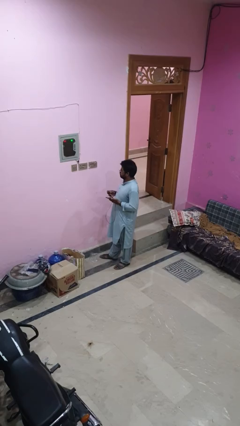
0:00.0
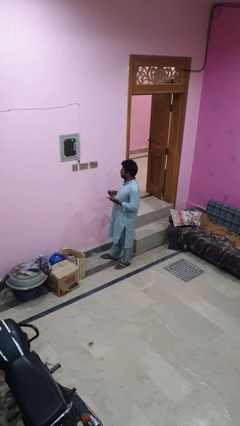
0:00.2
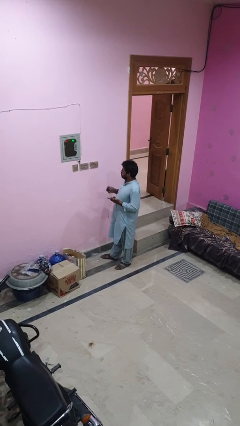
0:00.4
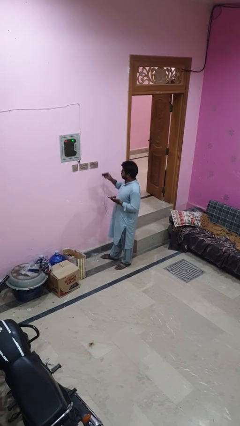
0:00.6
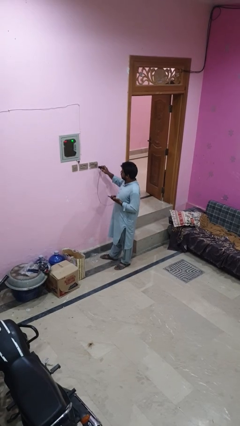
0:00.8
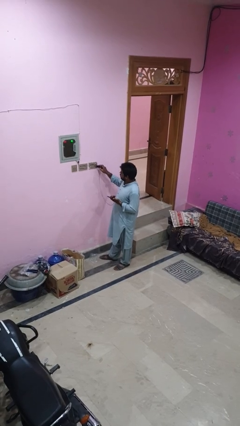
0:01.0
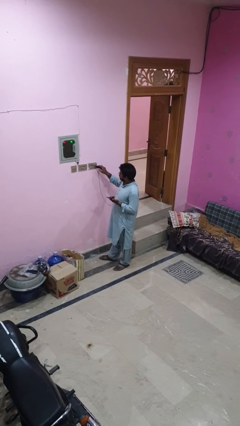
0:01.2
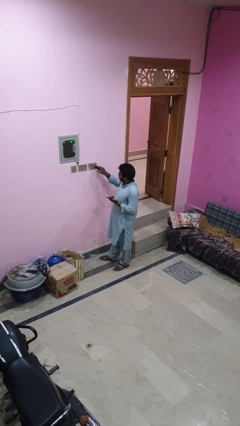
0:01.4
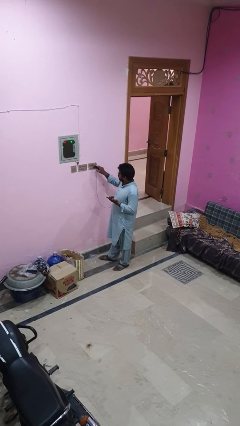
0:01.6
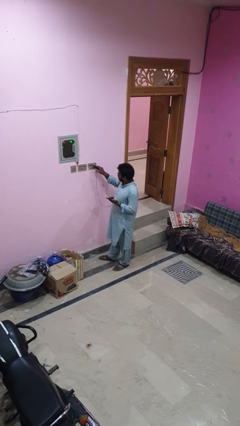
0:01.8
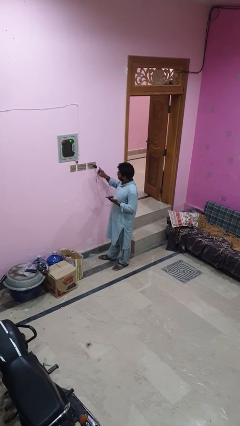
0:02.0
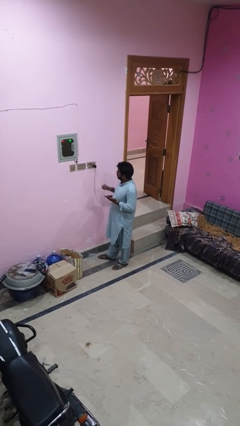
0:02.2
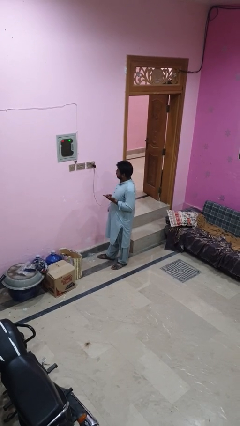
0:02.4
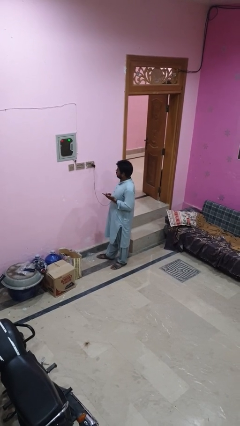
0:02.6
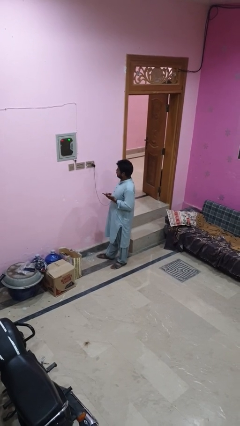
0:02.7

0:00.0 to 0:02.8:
person plugs into electrical socket

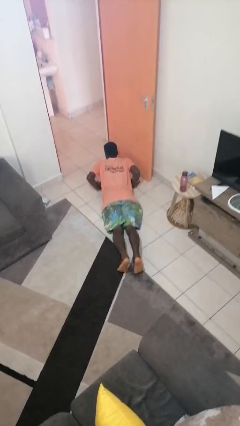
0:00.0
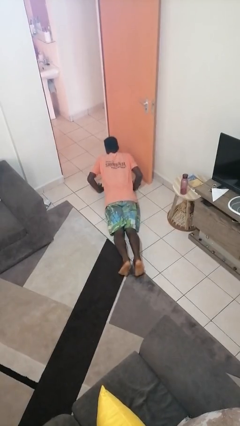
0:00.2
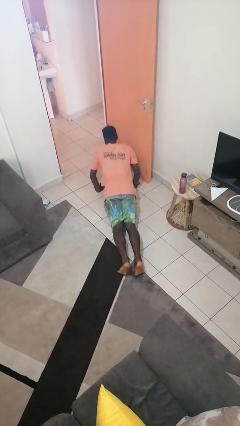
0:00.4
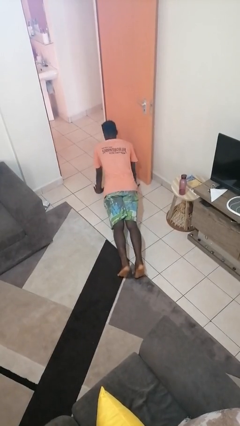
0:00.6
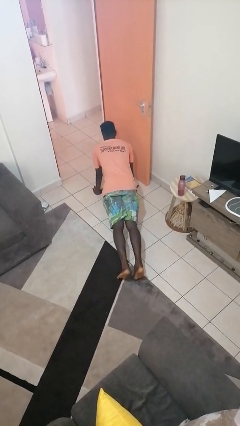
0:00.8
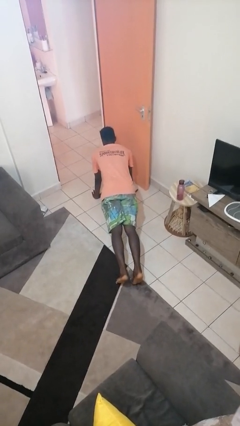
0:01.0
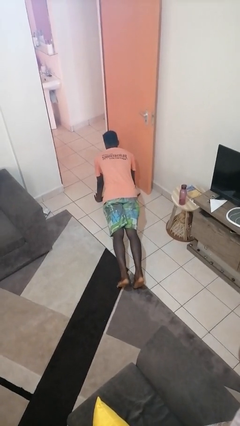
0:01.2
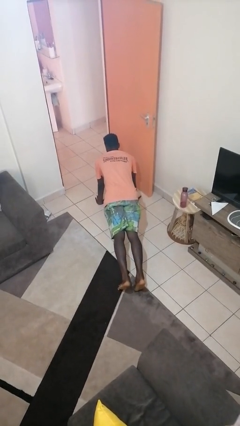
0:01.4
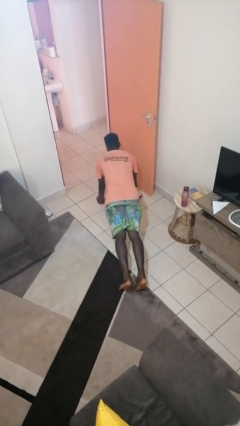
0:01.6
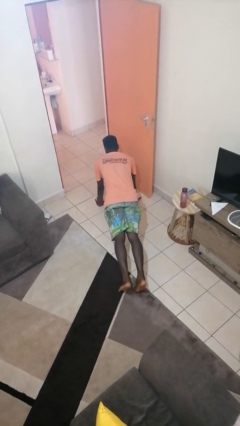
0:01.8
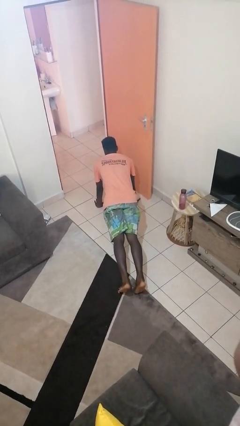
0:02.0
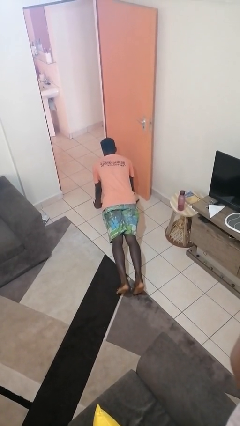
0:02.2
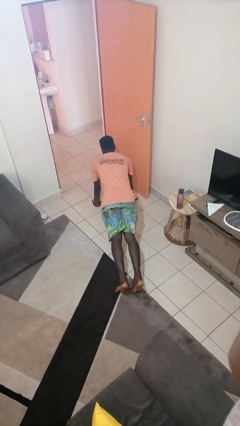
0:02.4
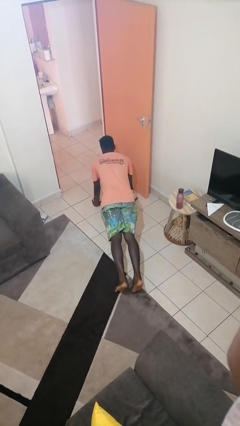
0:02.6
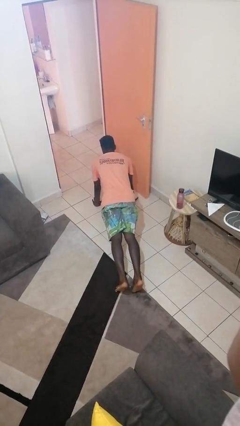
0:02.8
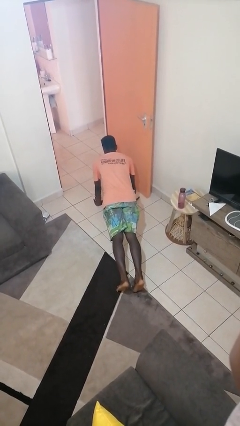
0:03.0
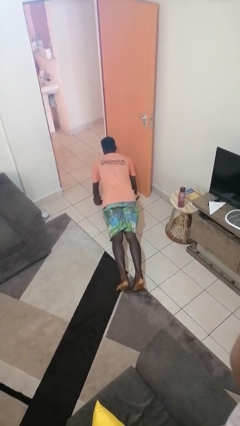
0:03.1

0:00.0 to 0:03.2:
person exercises with pushup

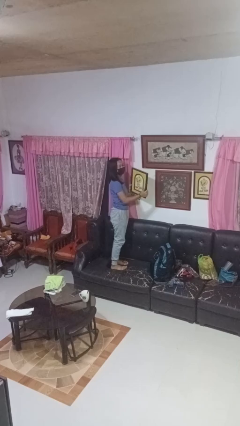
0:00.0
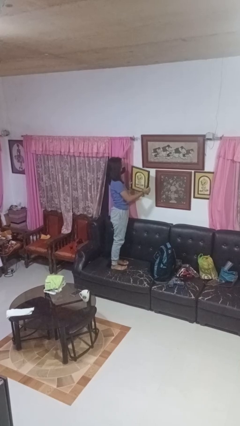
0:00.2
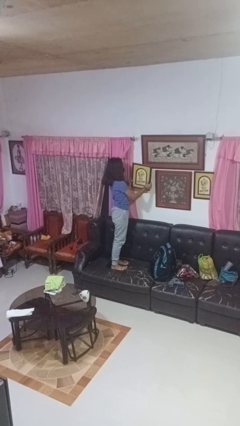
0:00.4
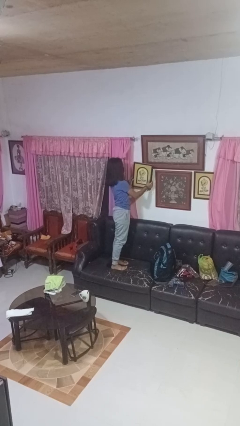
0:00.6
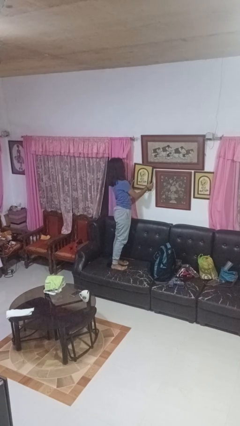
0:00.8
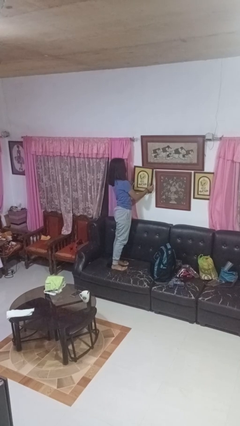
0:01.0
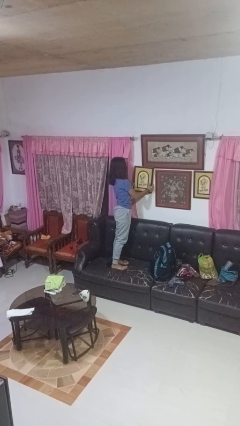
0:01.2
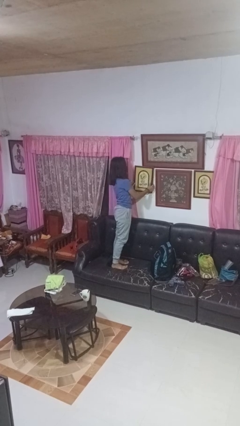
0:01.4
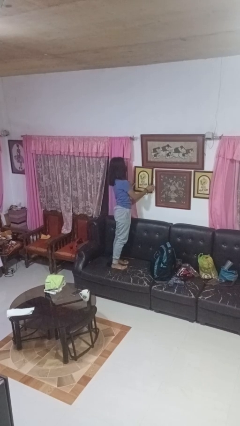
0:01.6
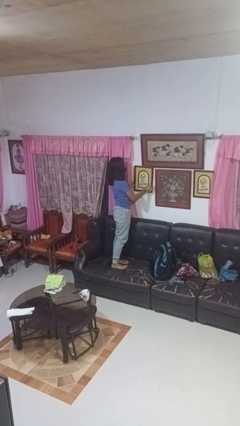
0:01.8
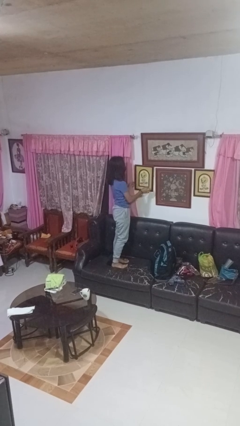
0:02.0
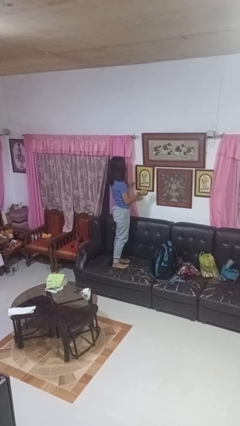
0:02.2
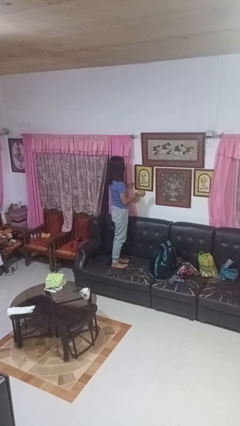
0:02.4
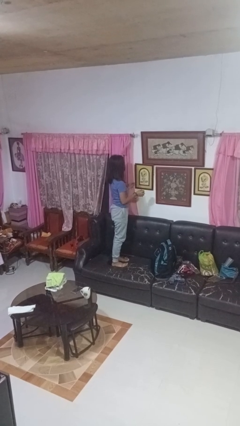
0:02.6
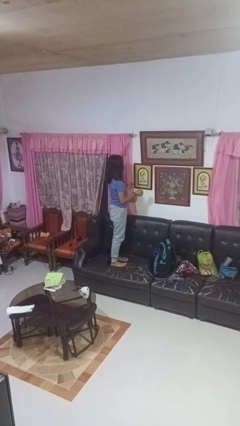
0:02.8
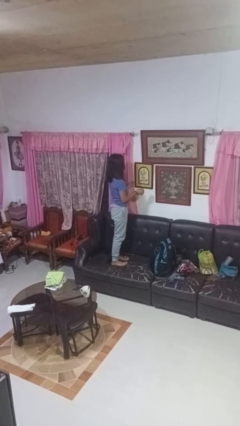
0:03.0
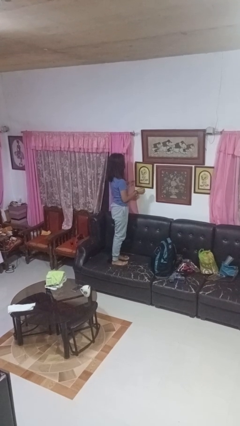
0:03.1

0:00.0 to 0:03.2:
person puts up picture frame

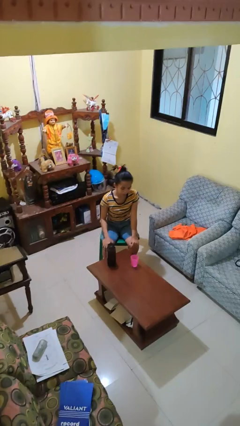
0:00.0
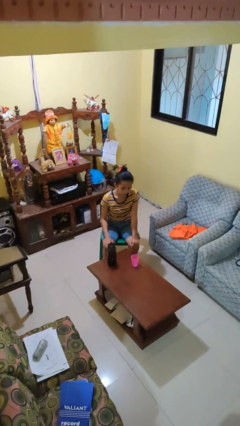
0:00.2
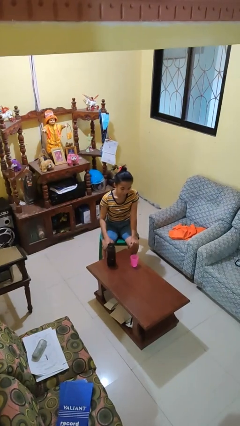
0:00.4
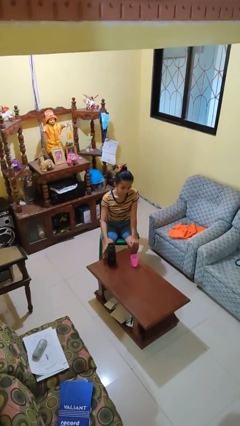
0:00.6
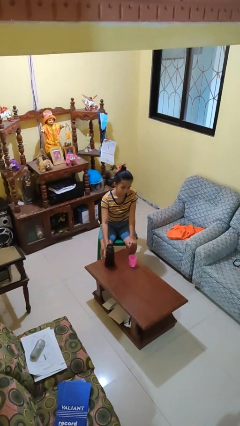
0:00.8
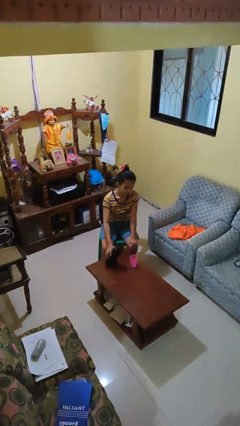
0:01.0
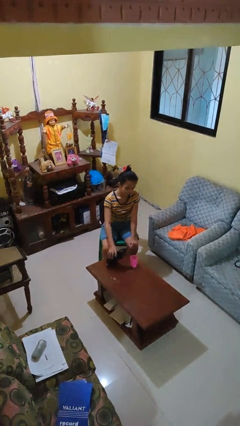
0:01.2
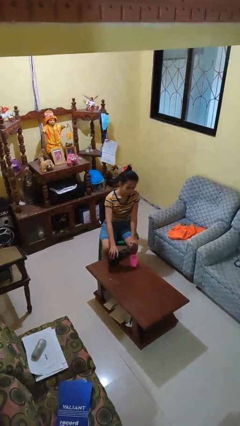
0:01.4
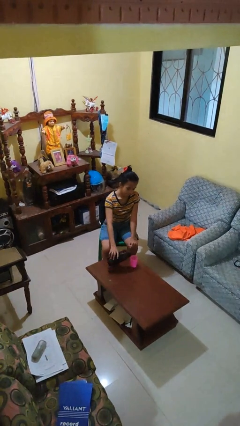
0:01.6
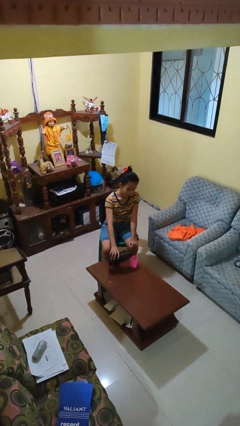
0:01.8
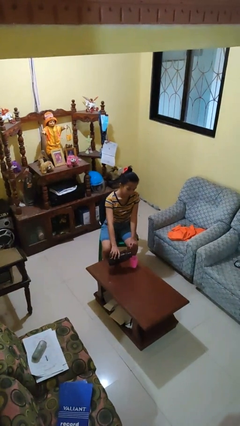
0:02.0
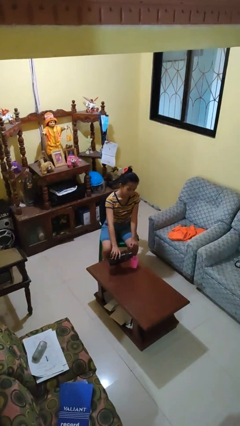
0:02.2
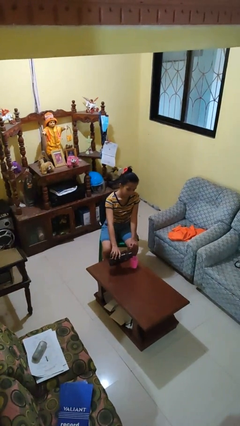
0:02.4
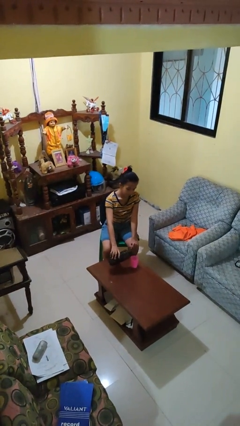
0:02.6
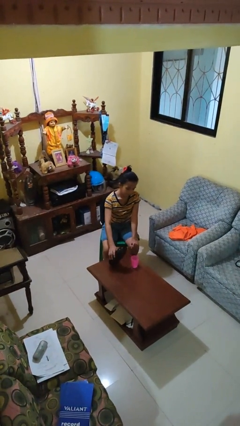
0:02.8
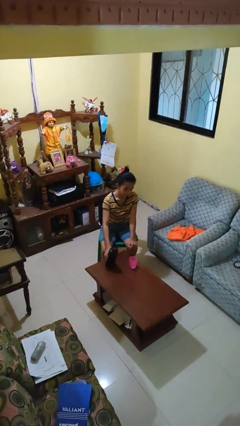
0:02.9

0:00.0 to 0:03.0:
person pours liquid into cup

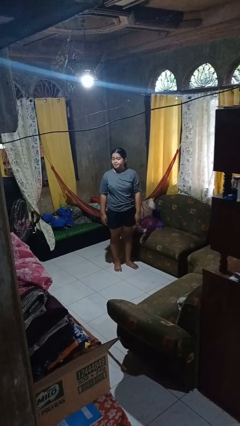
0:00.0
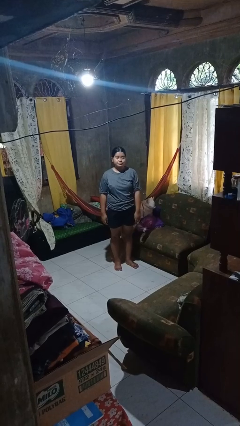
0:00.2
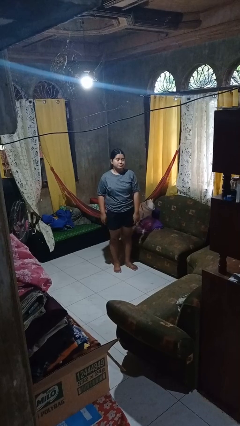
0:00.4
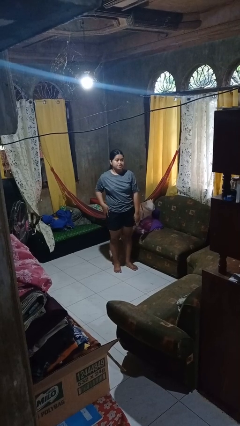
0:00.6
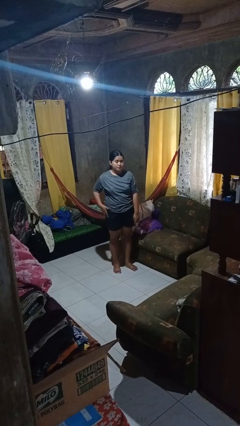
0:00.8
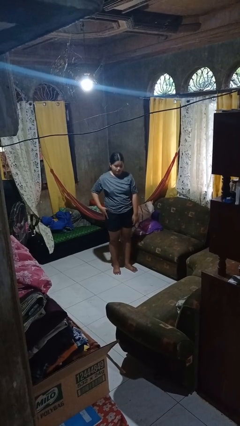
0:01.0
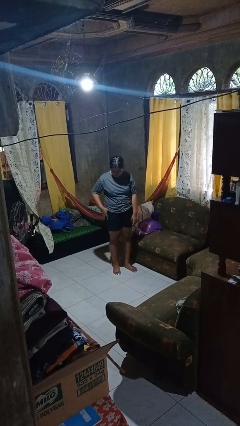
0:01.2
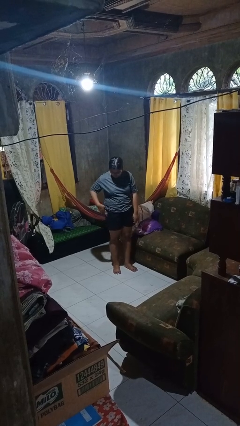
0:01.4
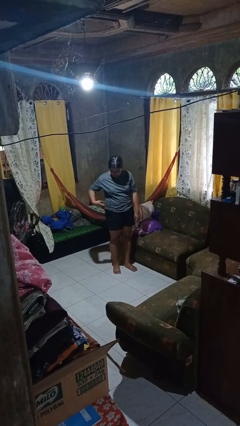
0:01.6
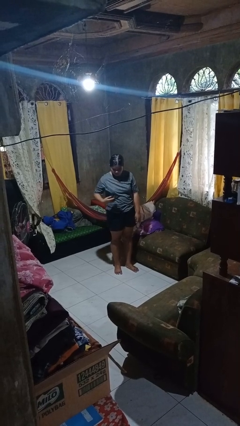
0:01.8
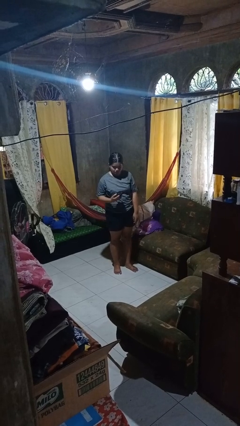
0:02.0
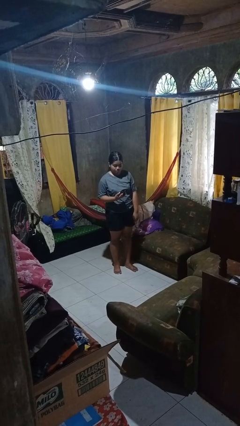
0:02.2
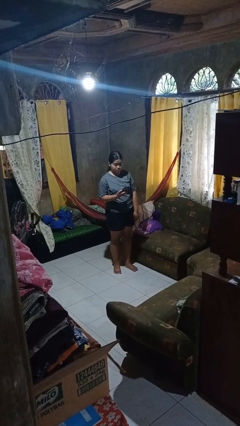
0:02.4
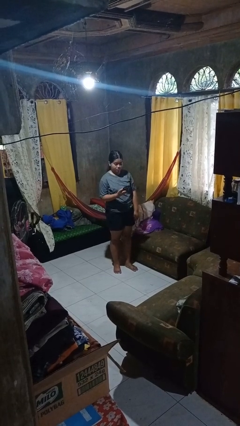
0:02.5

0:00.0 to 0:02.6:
person takes phone from pocket

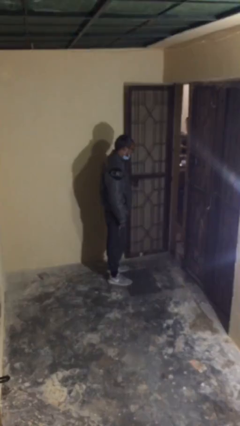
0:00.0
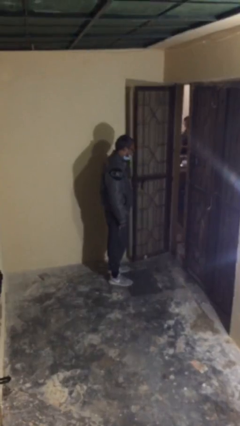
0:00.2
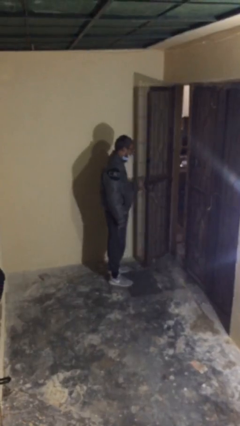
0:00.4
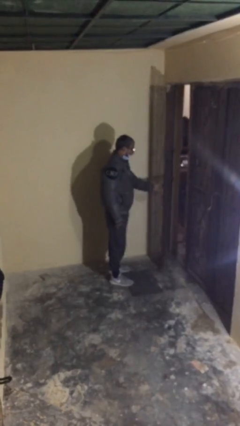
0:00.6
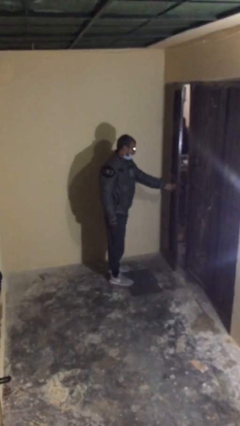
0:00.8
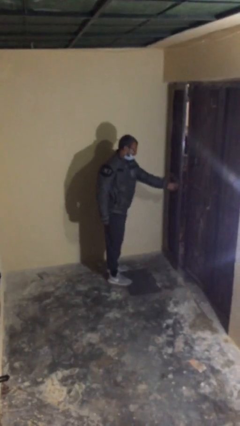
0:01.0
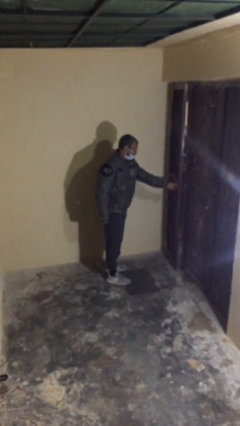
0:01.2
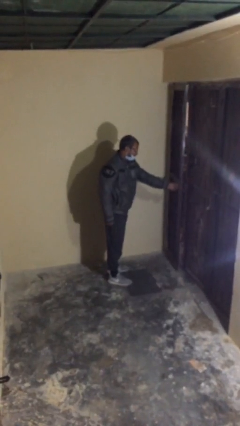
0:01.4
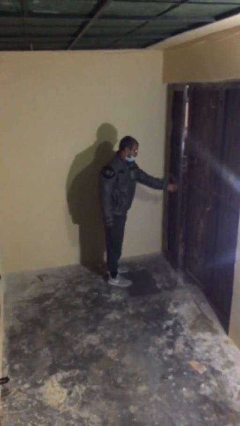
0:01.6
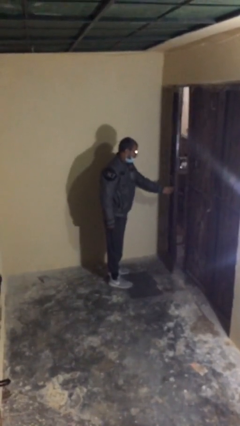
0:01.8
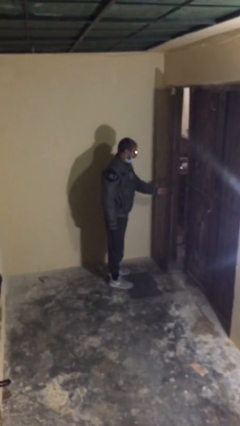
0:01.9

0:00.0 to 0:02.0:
person closes facility door

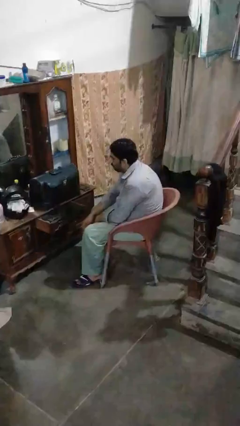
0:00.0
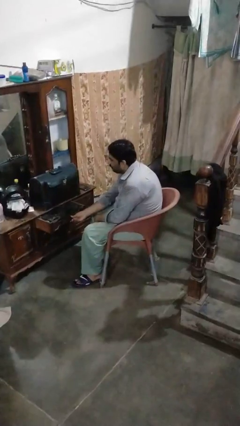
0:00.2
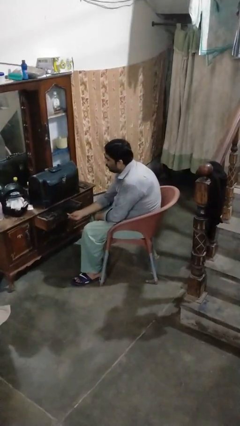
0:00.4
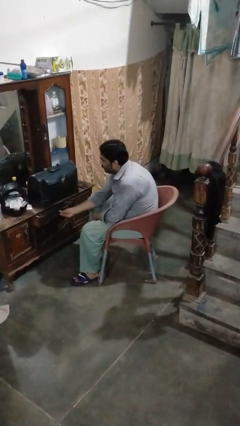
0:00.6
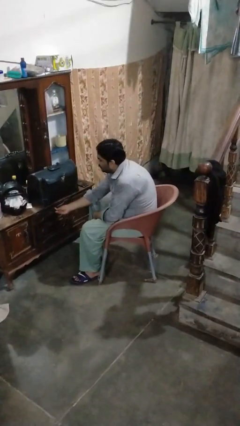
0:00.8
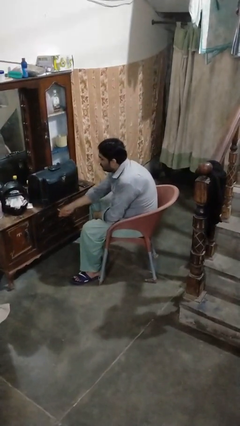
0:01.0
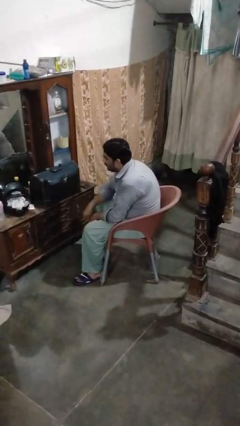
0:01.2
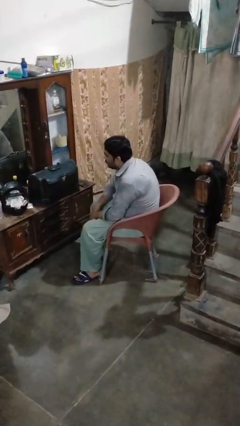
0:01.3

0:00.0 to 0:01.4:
person closes dresser drawer
